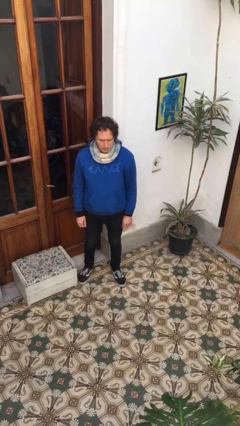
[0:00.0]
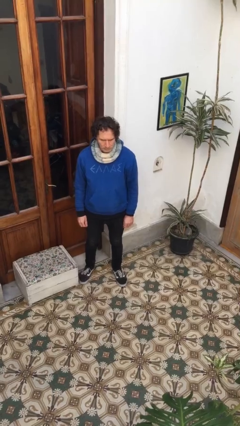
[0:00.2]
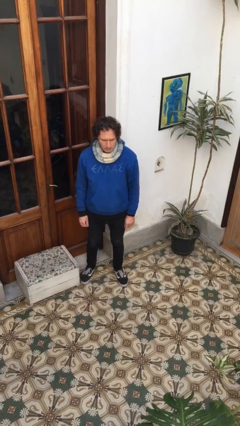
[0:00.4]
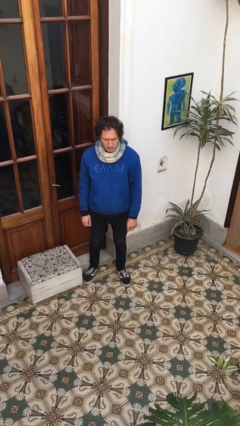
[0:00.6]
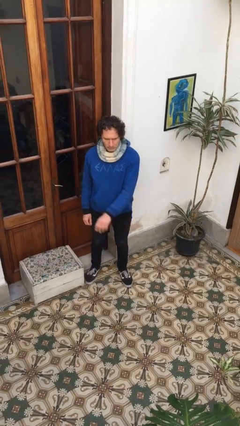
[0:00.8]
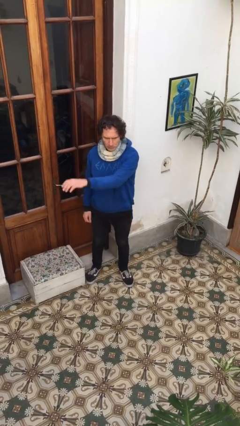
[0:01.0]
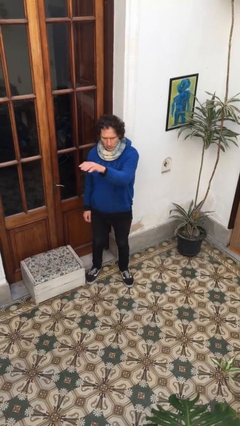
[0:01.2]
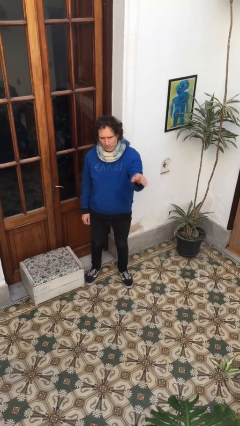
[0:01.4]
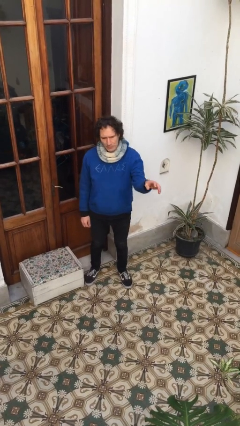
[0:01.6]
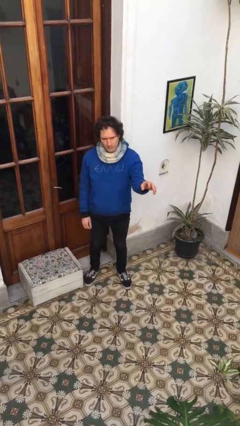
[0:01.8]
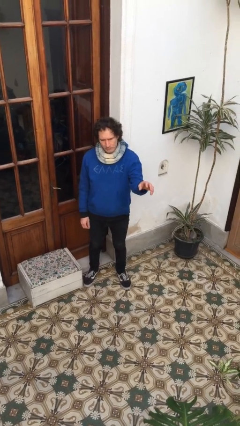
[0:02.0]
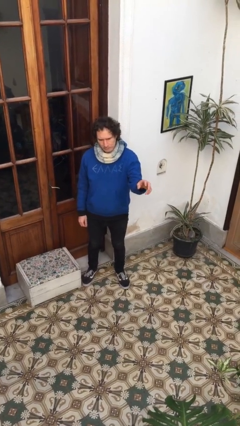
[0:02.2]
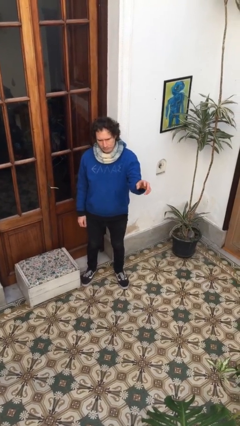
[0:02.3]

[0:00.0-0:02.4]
person gestures swipe left

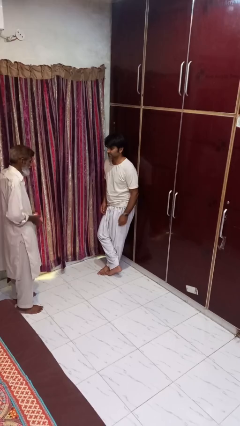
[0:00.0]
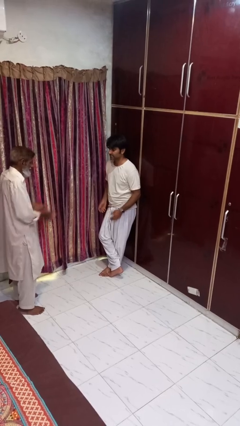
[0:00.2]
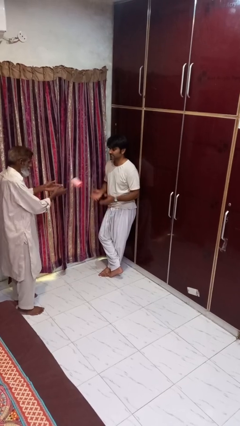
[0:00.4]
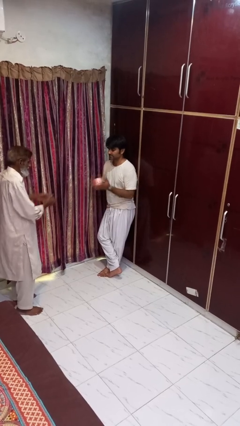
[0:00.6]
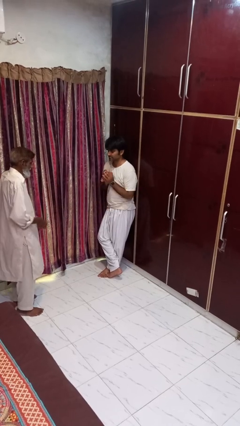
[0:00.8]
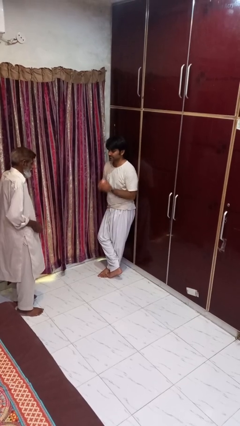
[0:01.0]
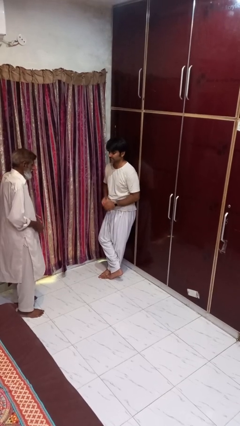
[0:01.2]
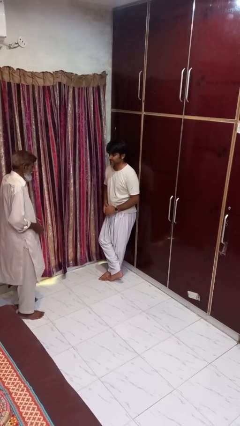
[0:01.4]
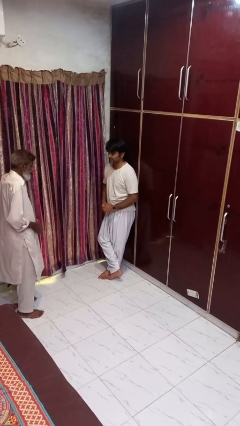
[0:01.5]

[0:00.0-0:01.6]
person catches object from person

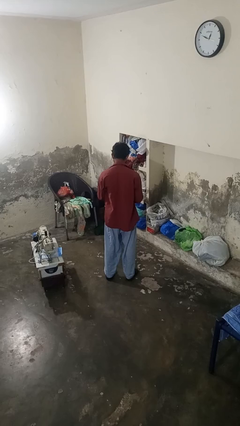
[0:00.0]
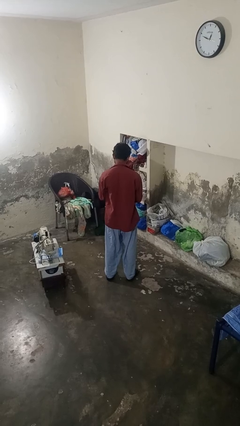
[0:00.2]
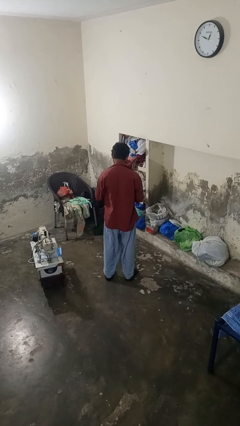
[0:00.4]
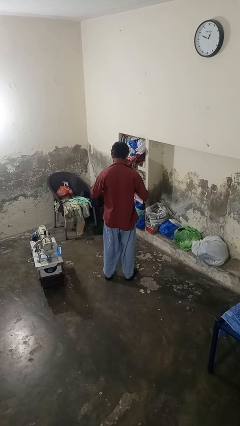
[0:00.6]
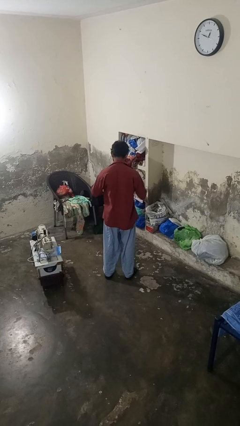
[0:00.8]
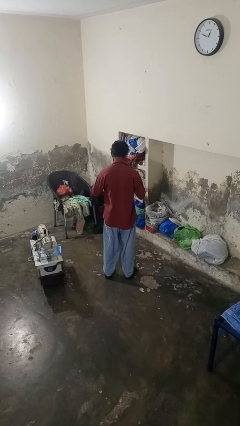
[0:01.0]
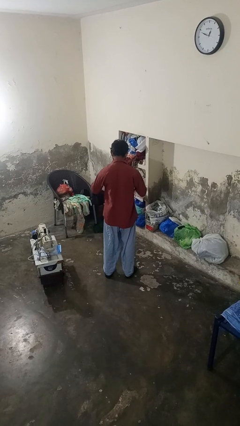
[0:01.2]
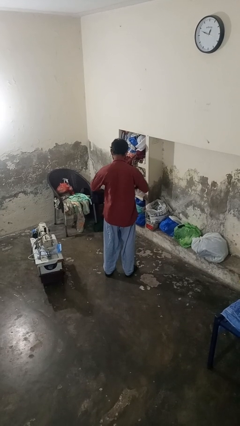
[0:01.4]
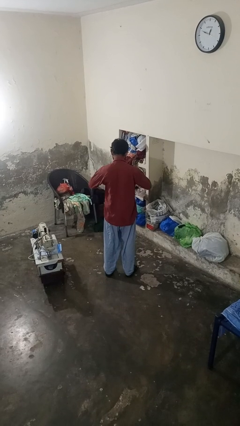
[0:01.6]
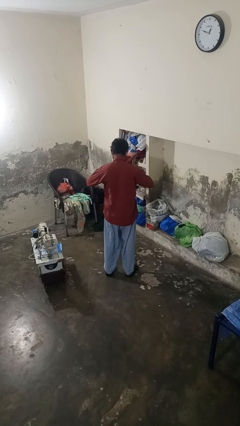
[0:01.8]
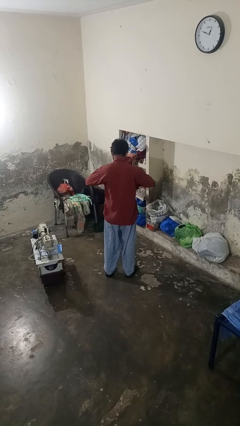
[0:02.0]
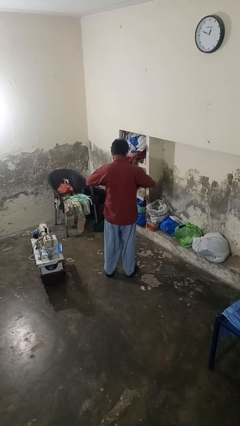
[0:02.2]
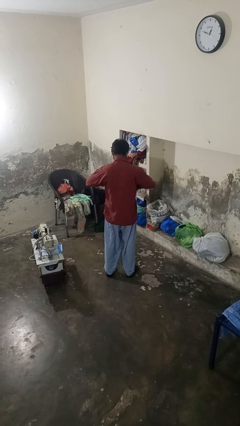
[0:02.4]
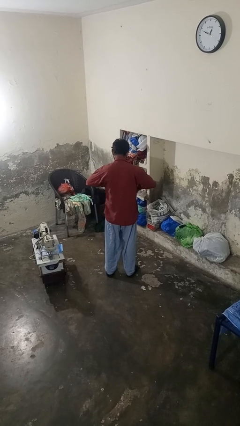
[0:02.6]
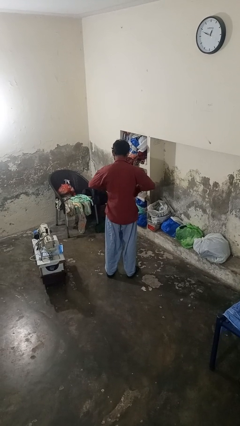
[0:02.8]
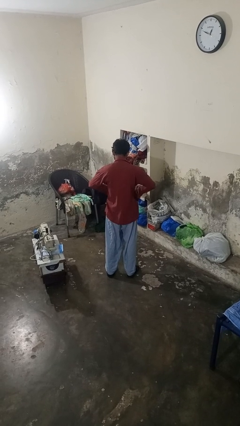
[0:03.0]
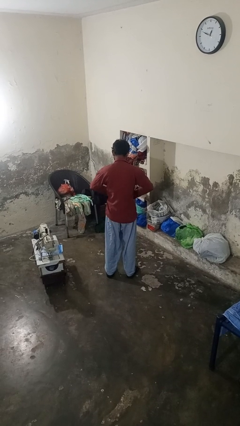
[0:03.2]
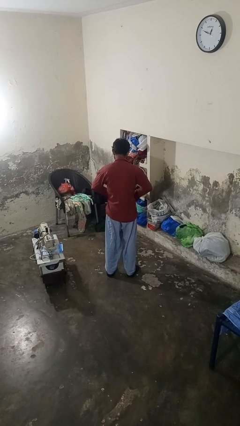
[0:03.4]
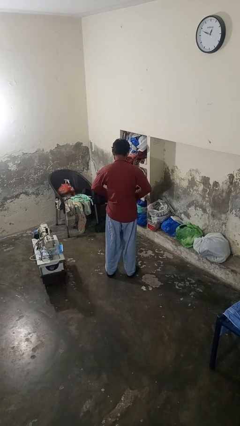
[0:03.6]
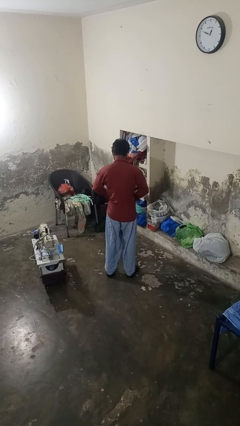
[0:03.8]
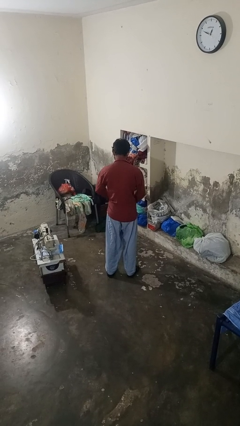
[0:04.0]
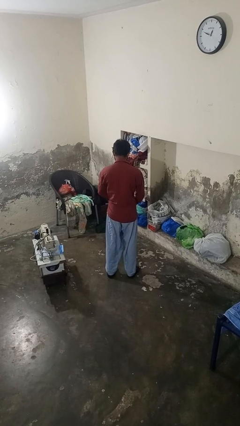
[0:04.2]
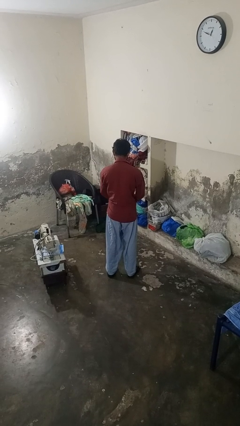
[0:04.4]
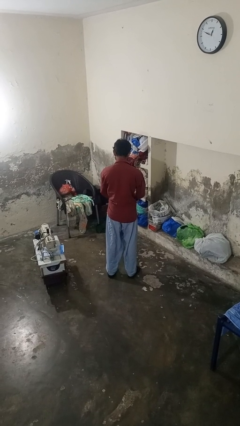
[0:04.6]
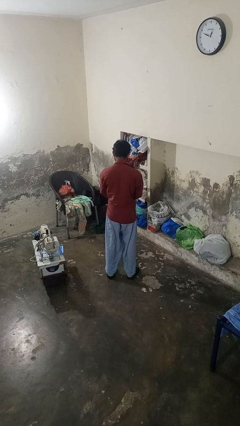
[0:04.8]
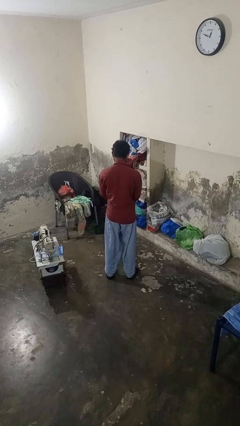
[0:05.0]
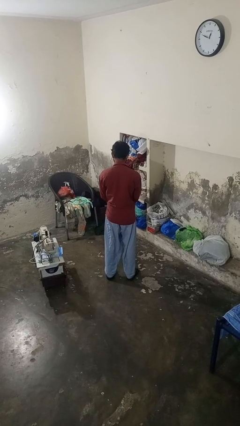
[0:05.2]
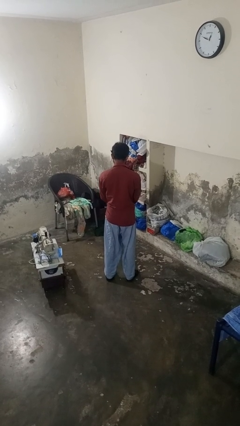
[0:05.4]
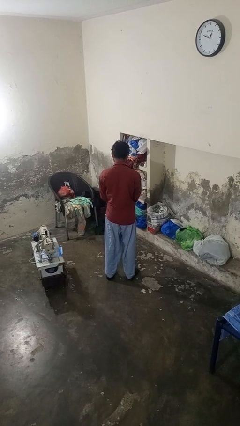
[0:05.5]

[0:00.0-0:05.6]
person buttons shirt

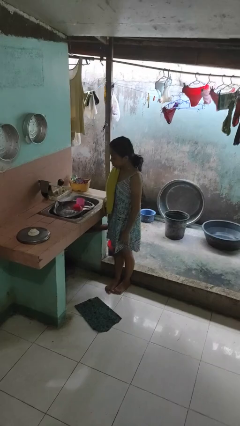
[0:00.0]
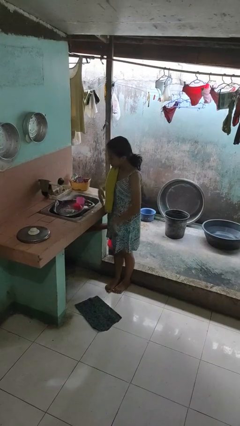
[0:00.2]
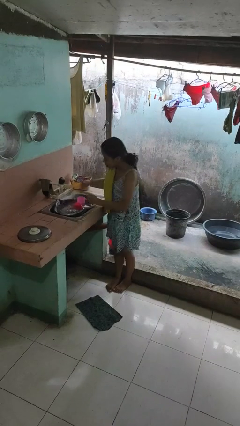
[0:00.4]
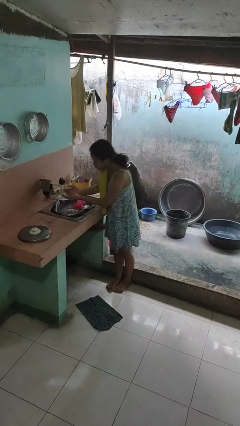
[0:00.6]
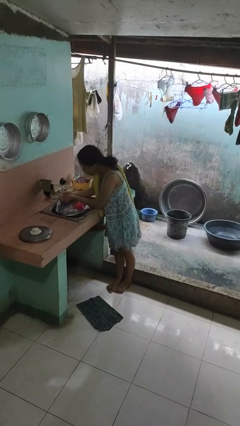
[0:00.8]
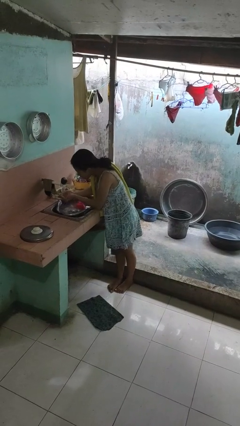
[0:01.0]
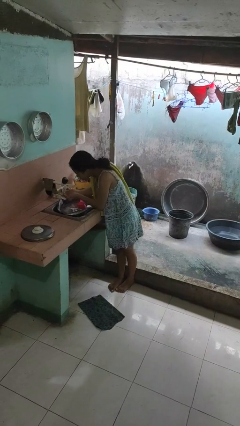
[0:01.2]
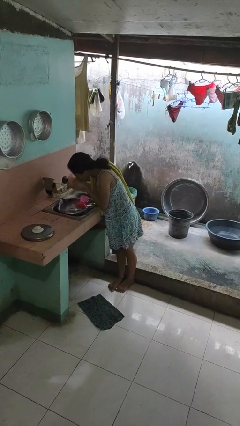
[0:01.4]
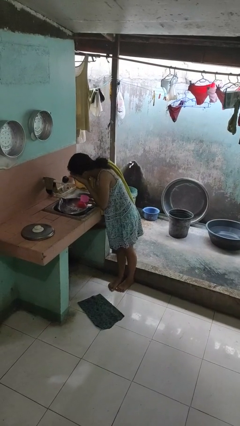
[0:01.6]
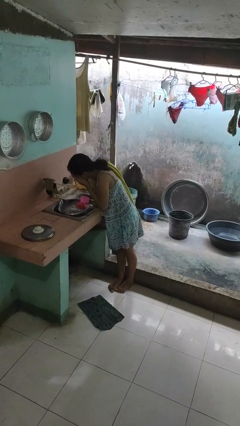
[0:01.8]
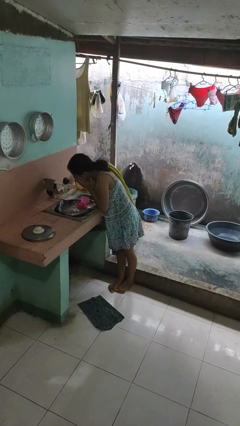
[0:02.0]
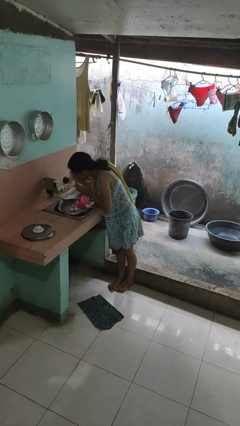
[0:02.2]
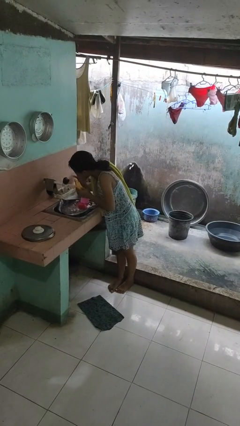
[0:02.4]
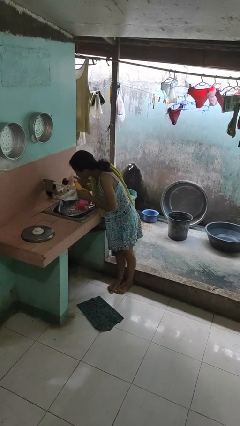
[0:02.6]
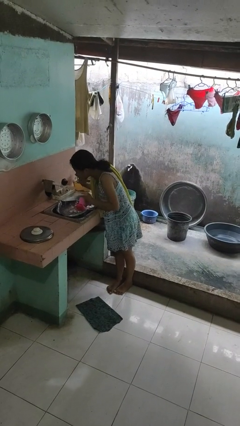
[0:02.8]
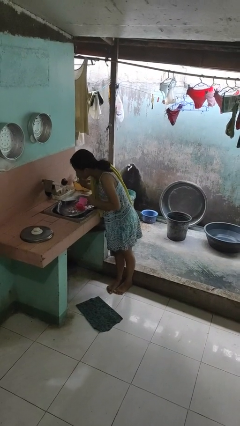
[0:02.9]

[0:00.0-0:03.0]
person washes face

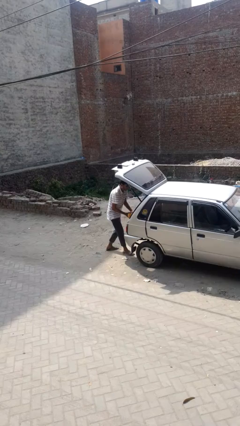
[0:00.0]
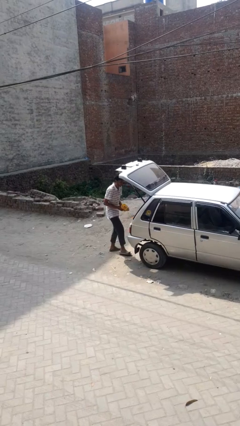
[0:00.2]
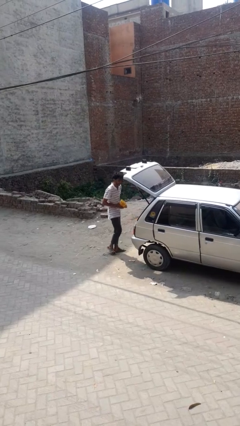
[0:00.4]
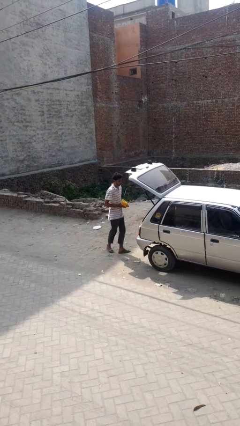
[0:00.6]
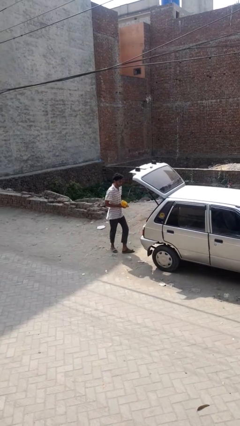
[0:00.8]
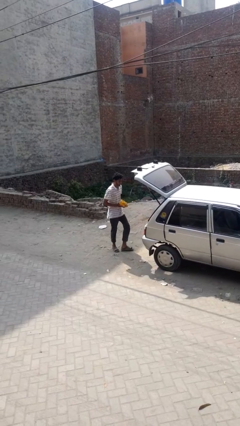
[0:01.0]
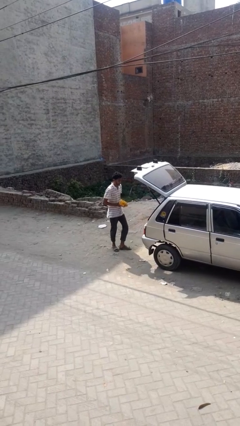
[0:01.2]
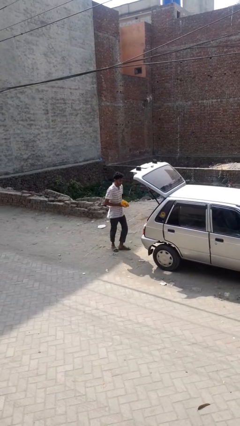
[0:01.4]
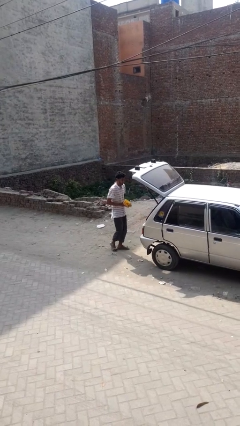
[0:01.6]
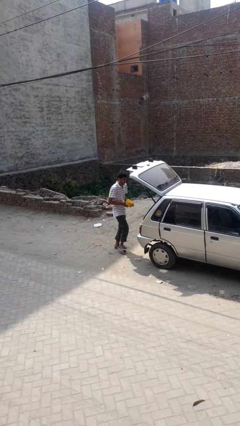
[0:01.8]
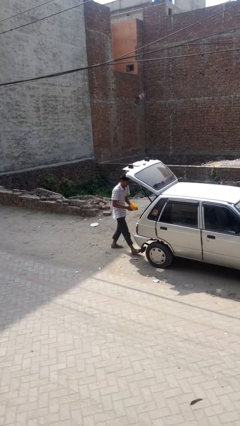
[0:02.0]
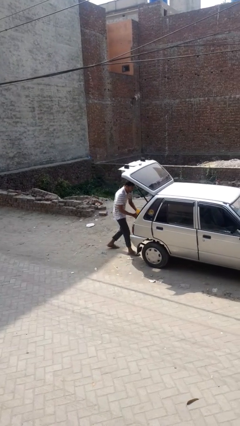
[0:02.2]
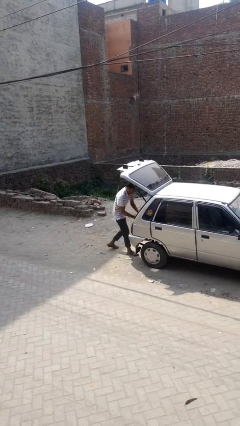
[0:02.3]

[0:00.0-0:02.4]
person unloads car

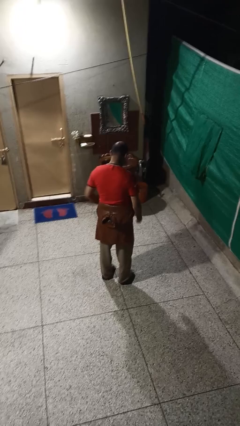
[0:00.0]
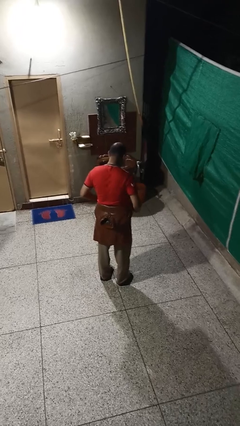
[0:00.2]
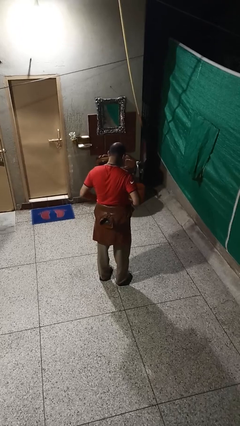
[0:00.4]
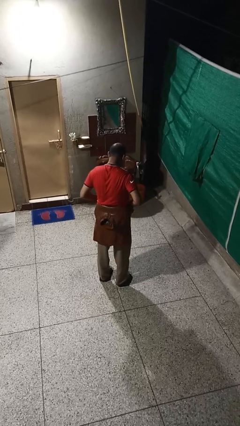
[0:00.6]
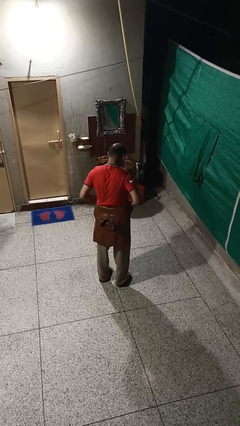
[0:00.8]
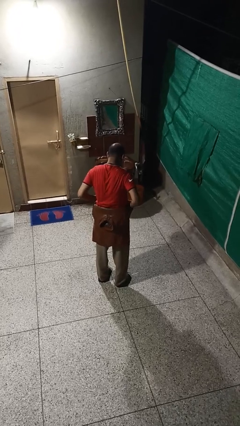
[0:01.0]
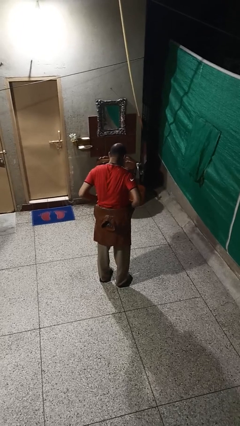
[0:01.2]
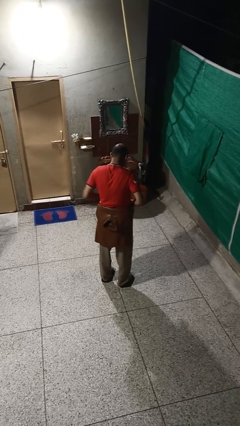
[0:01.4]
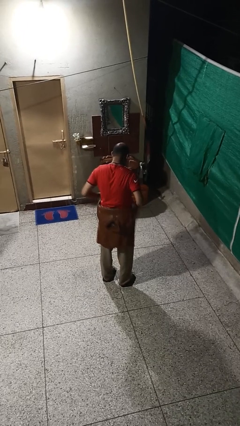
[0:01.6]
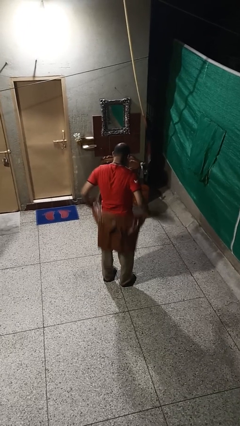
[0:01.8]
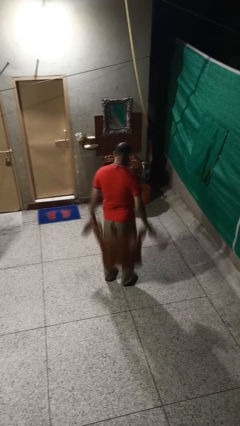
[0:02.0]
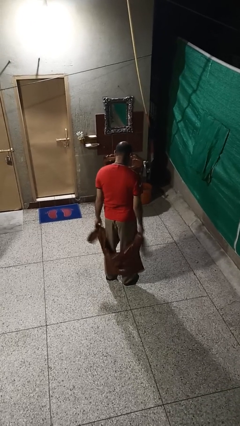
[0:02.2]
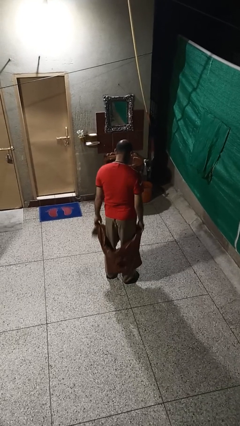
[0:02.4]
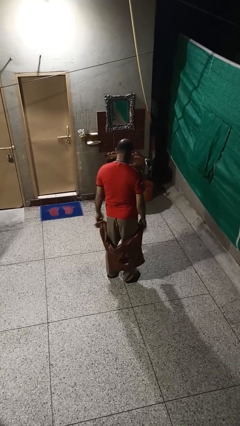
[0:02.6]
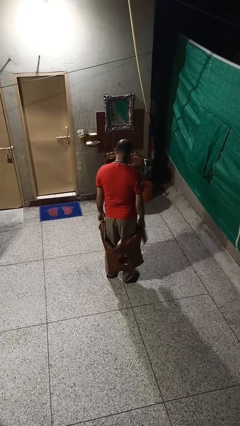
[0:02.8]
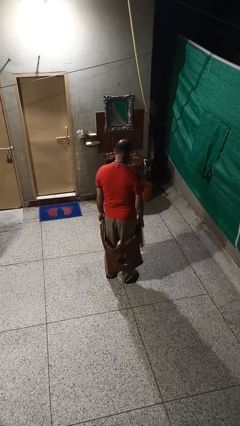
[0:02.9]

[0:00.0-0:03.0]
person unties jacket around waist
